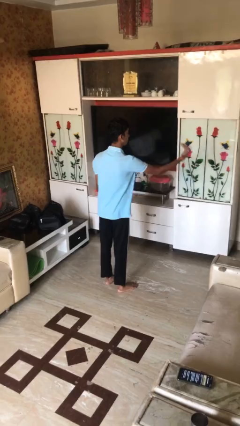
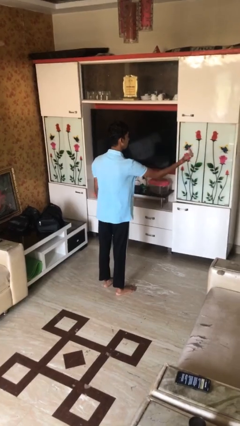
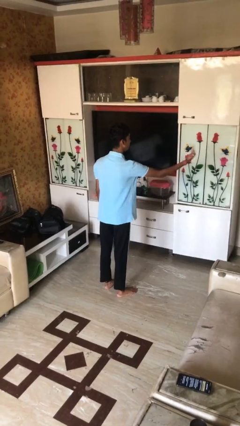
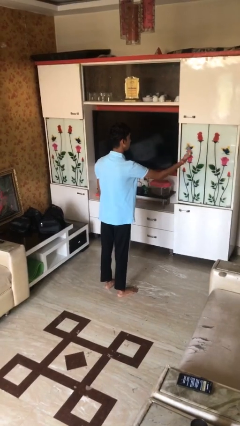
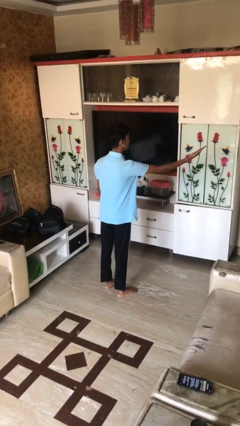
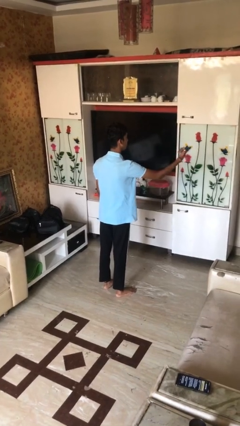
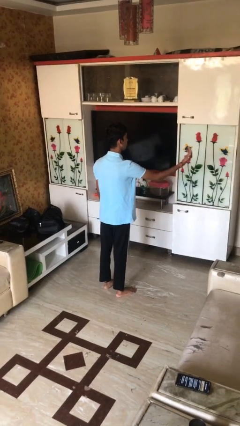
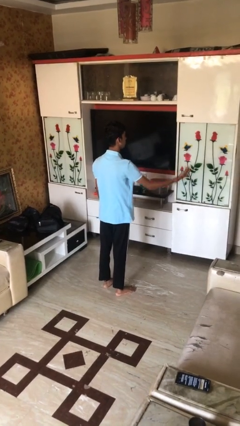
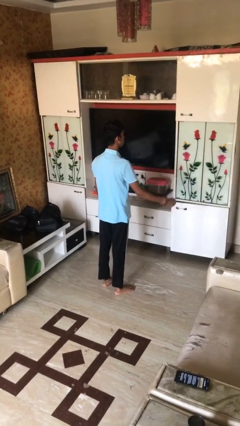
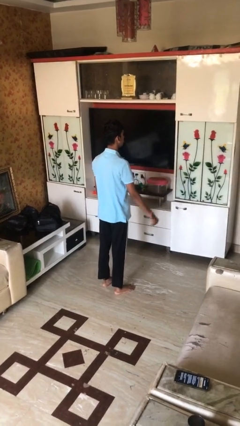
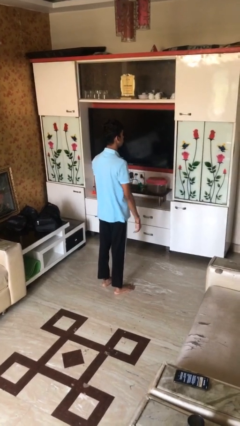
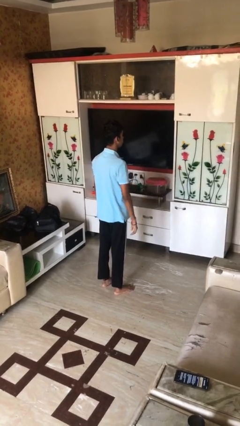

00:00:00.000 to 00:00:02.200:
person gestures come here

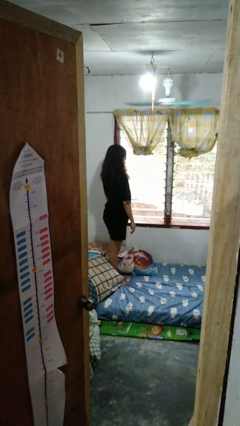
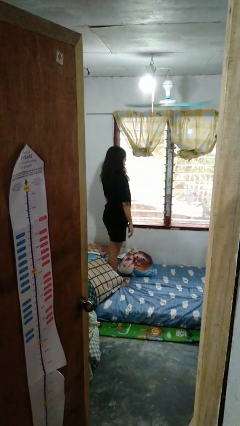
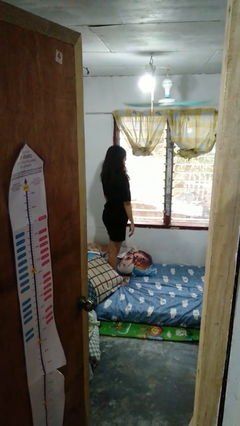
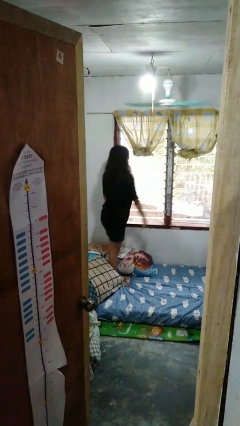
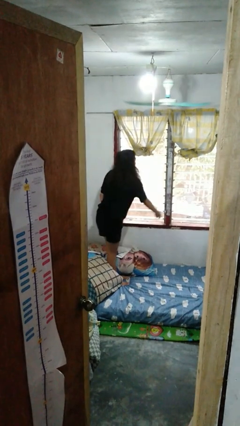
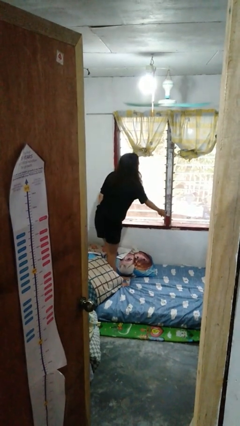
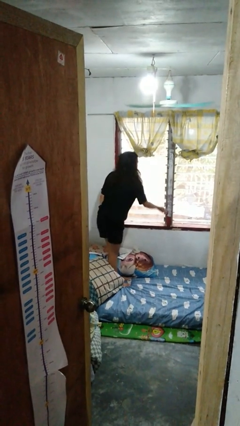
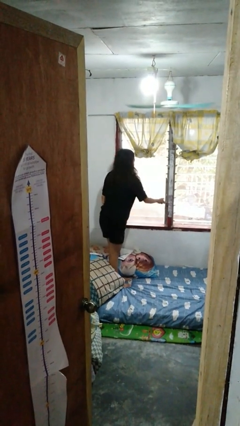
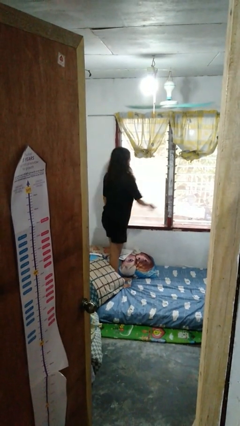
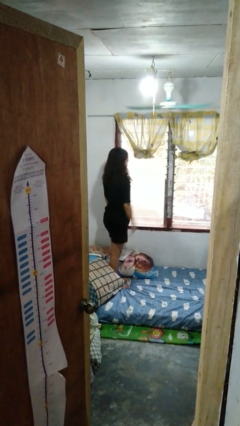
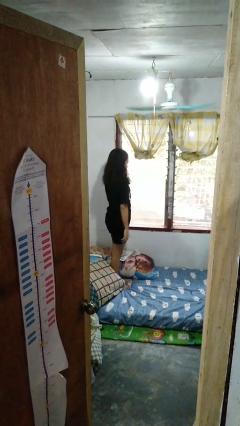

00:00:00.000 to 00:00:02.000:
person closes home window

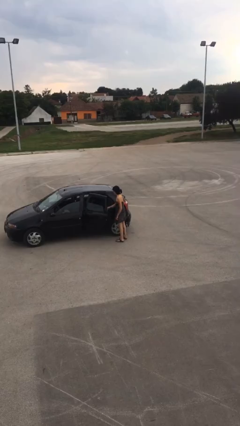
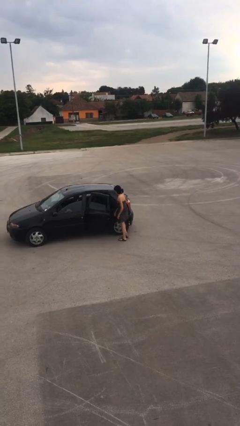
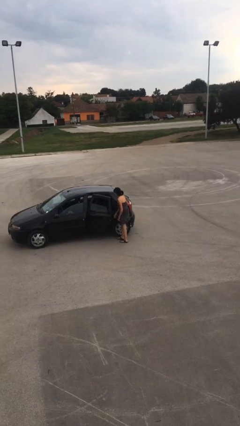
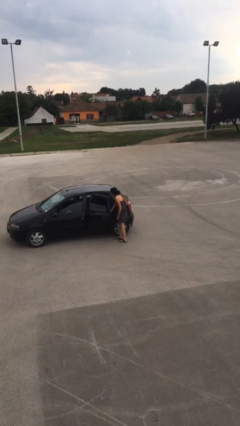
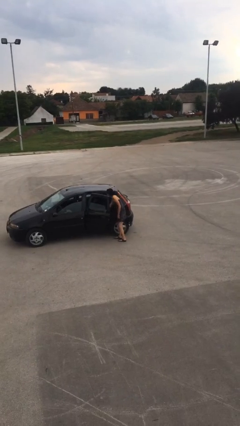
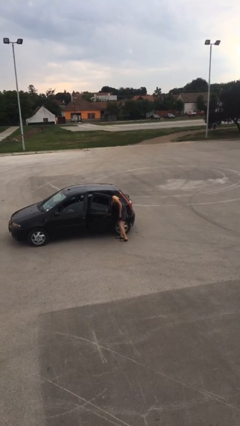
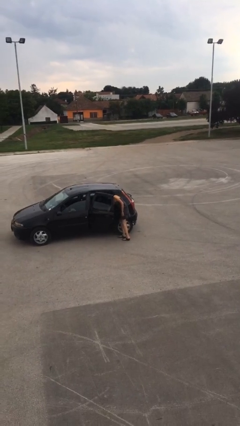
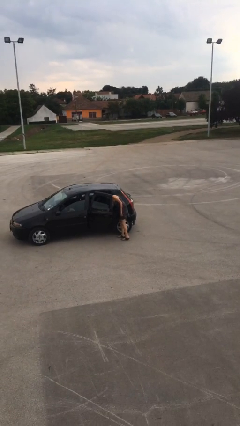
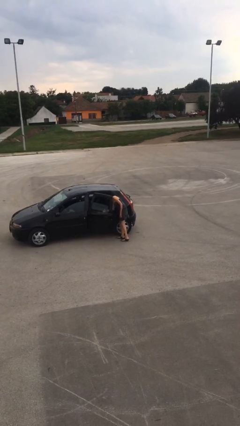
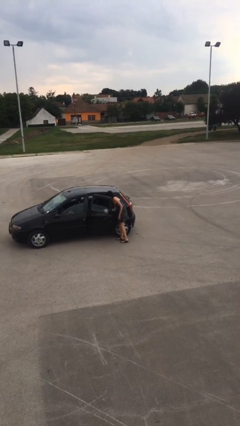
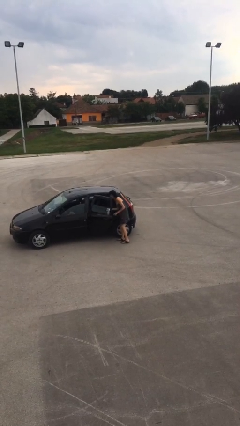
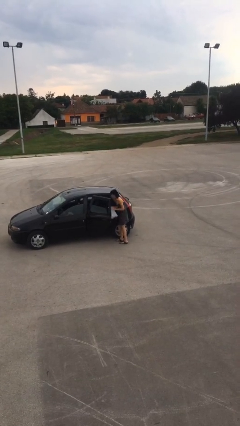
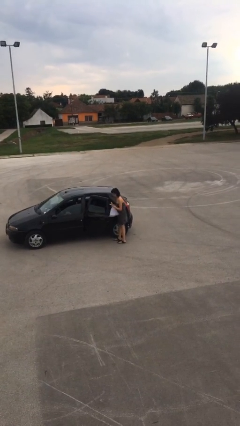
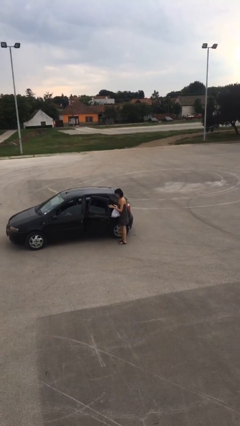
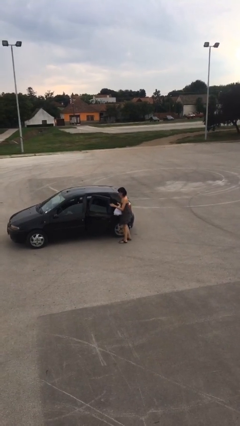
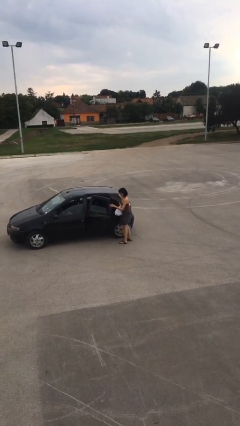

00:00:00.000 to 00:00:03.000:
person unloads car

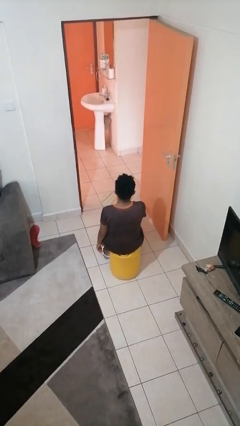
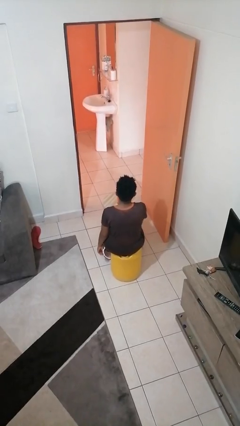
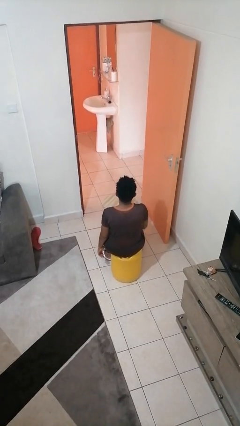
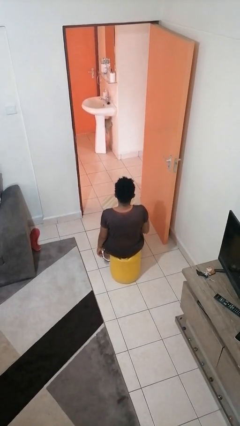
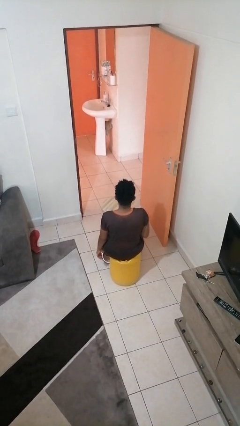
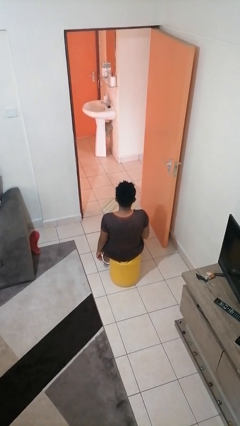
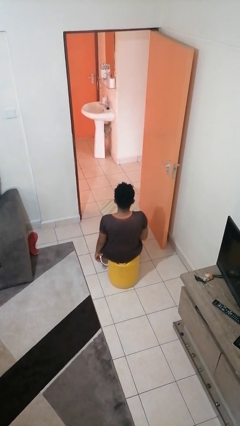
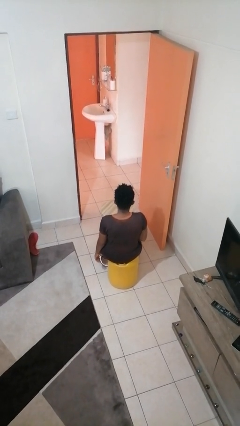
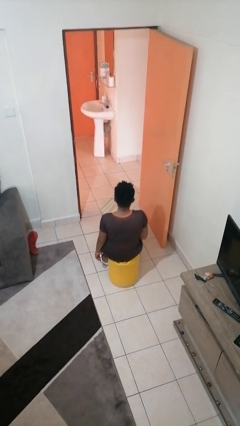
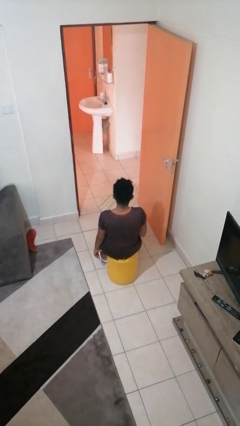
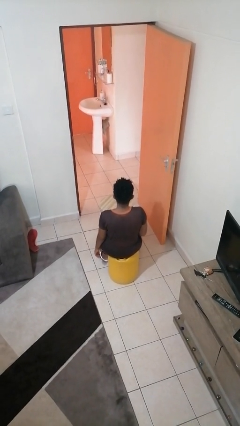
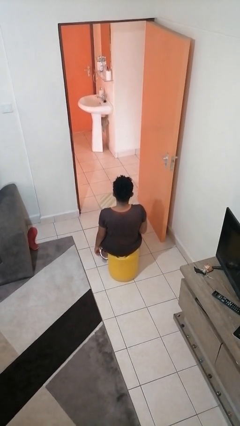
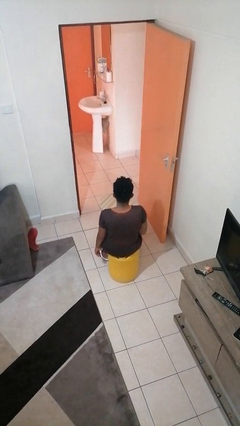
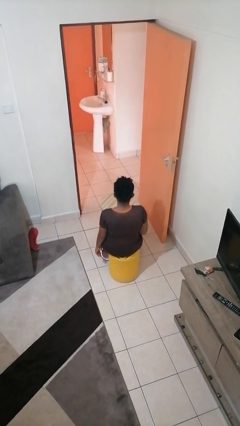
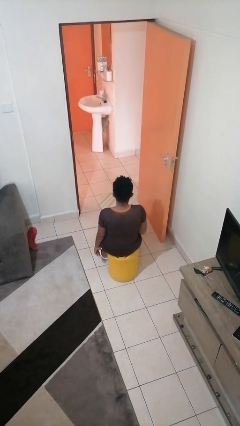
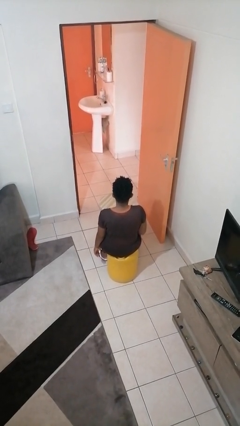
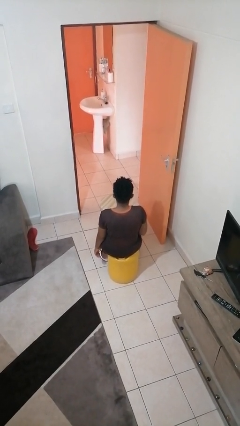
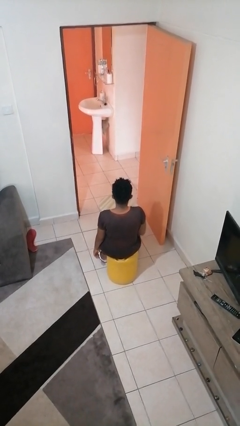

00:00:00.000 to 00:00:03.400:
person drinks from straw

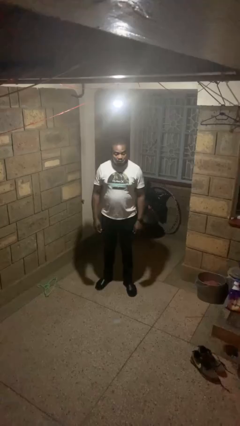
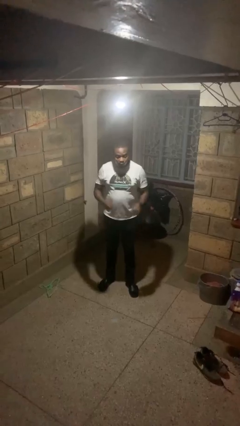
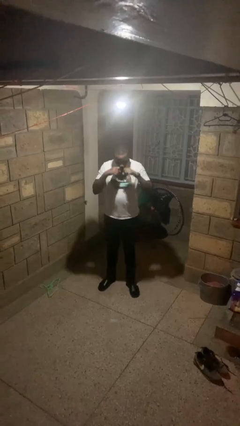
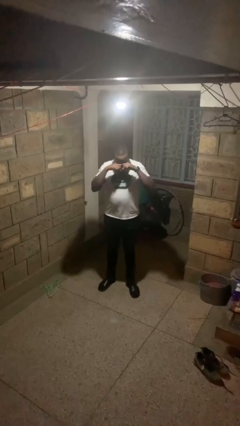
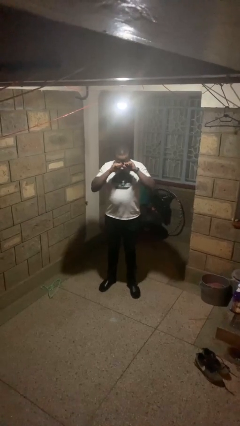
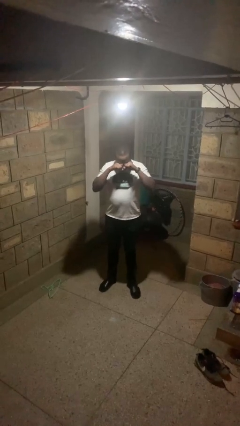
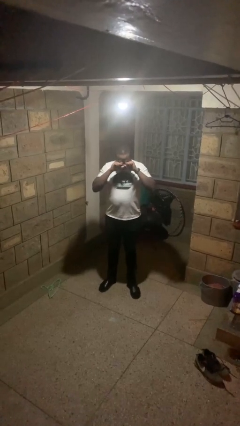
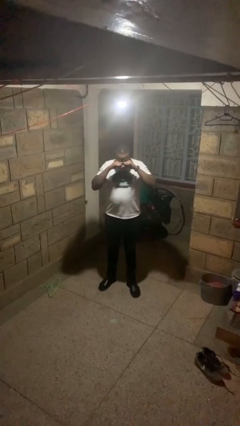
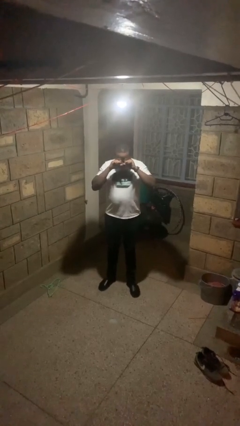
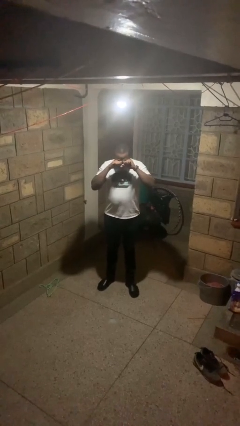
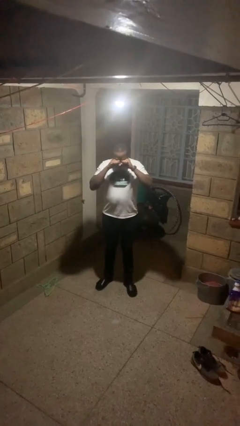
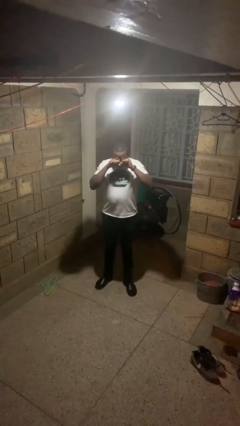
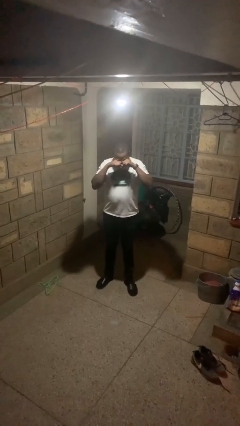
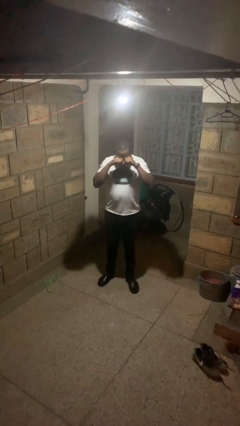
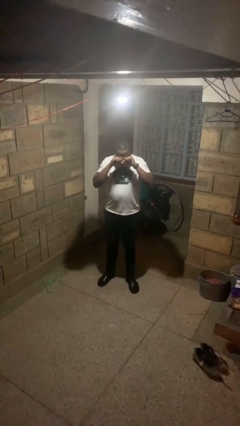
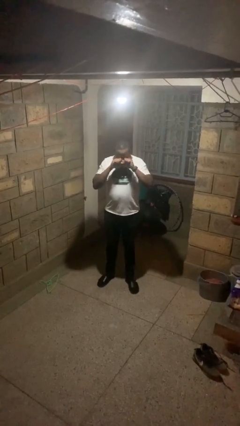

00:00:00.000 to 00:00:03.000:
person rubs eyes

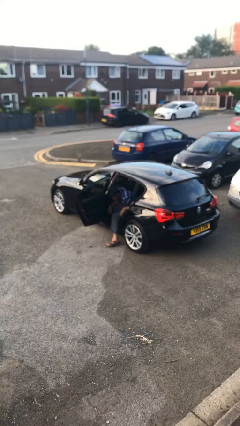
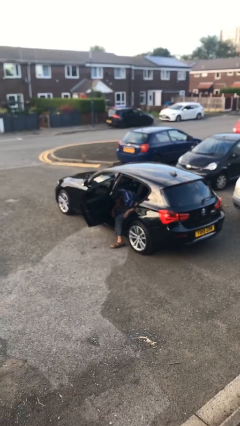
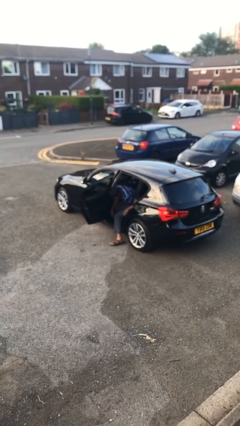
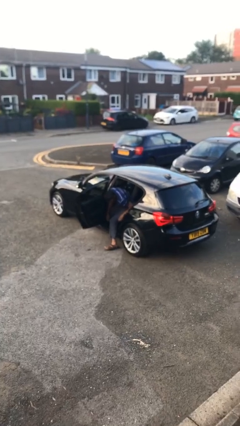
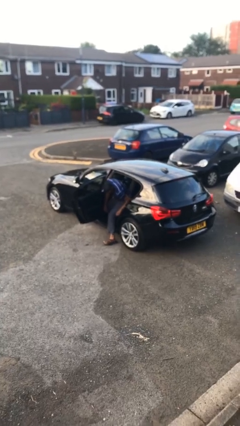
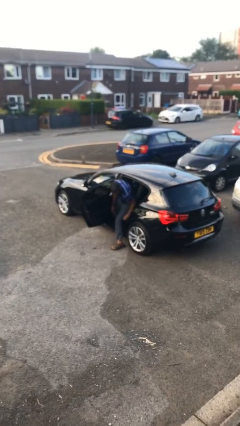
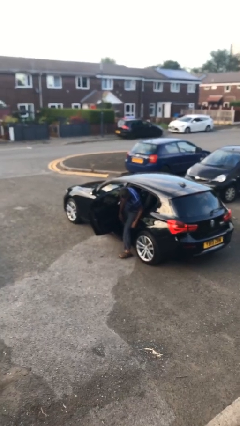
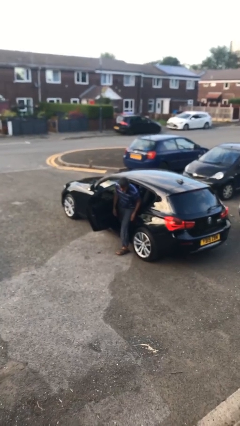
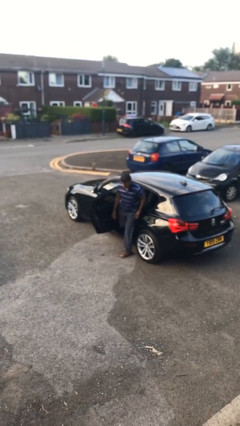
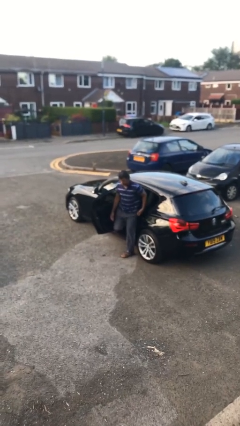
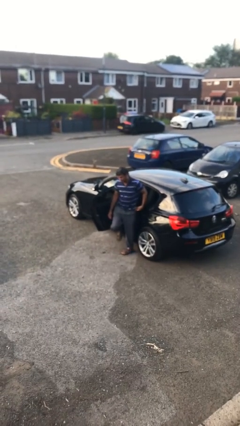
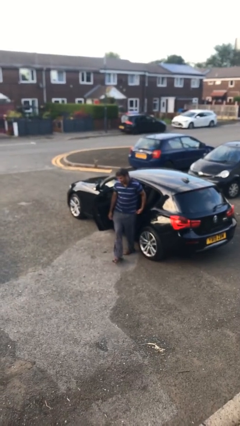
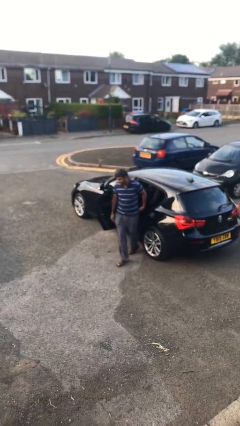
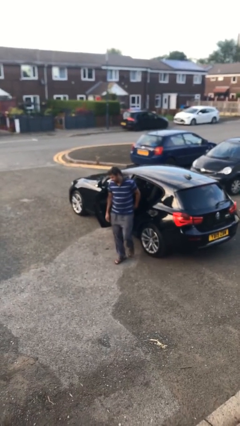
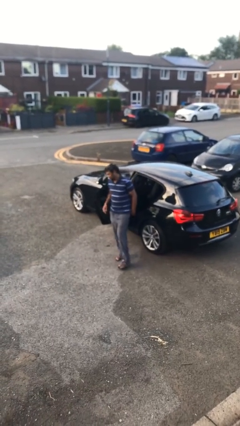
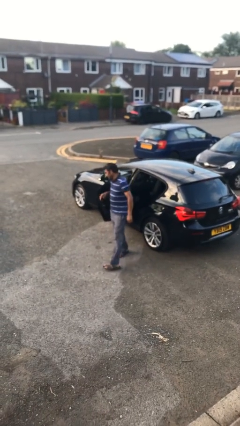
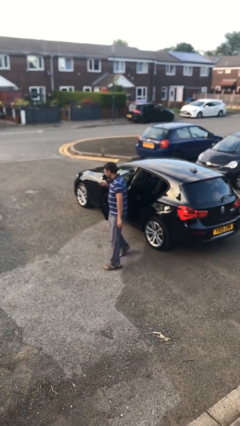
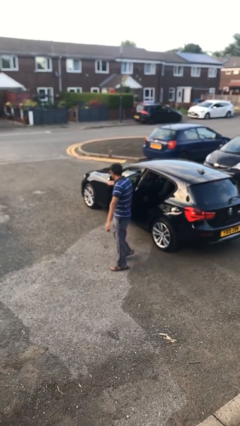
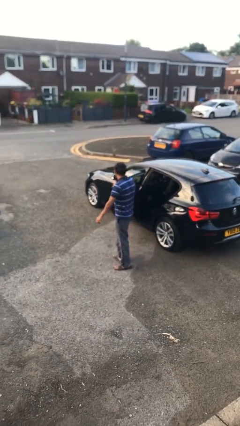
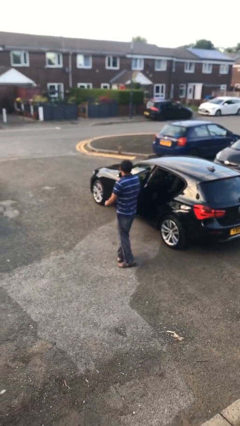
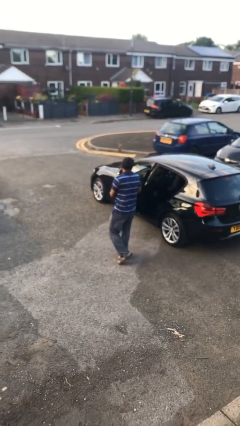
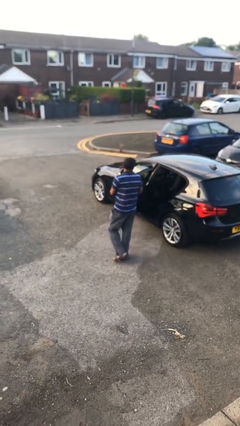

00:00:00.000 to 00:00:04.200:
person exits car
